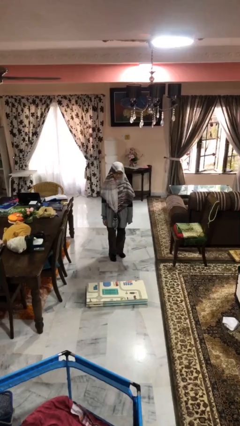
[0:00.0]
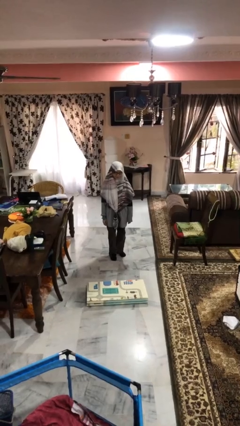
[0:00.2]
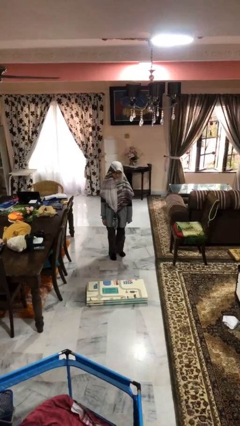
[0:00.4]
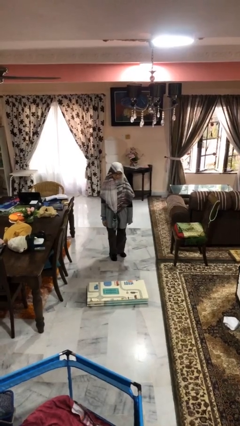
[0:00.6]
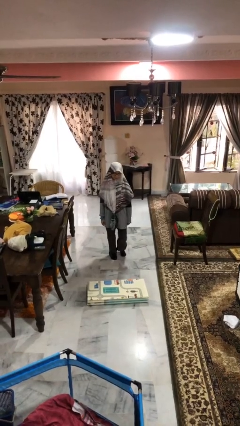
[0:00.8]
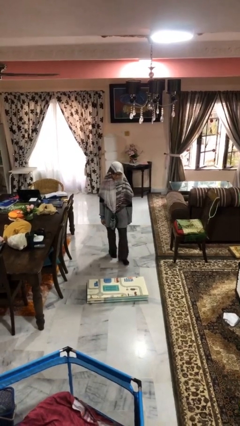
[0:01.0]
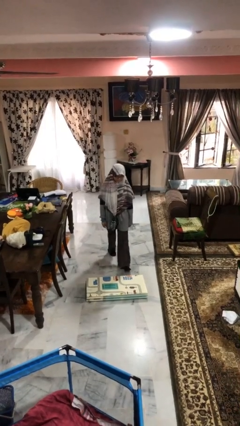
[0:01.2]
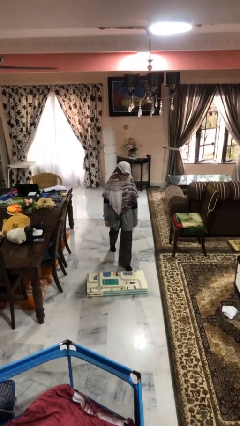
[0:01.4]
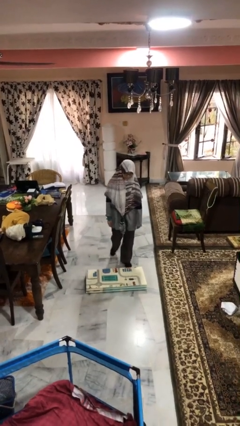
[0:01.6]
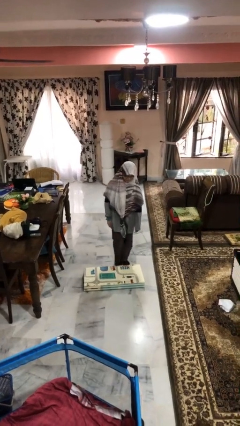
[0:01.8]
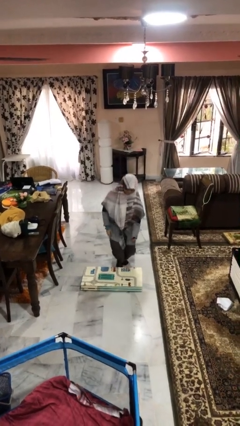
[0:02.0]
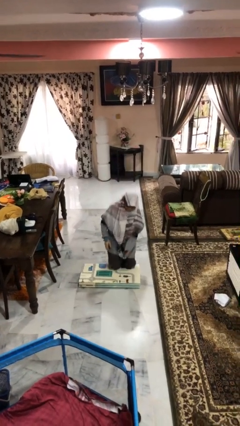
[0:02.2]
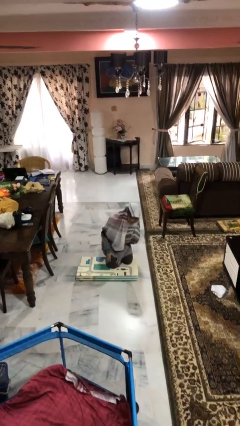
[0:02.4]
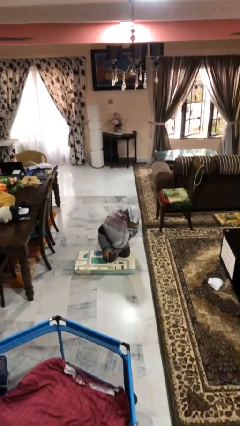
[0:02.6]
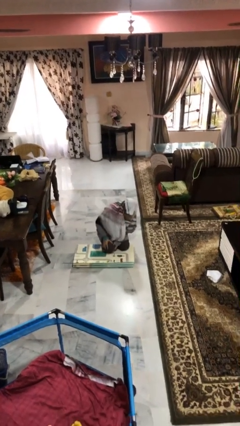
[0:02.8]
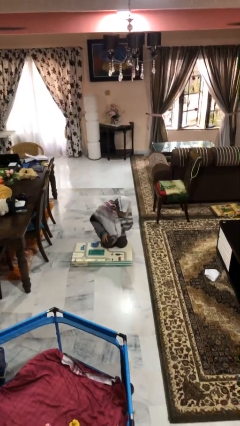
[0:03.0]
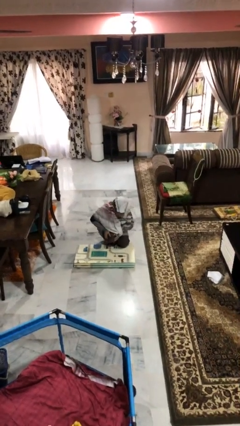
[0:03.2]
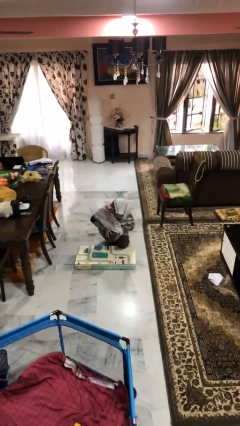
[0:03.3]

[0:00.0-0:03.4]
person trips on object on floor

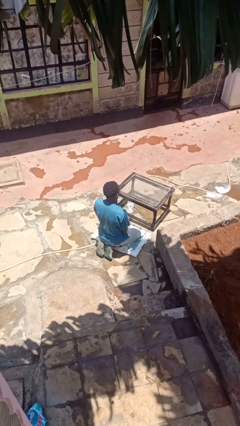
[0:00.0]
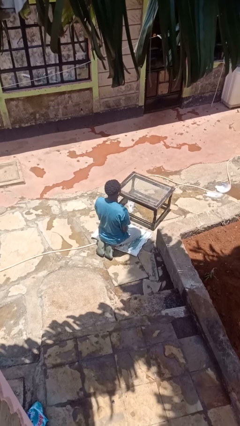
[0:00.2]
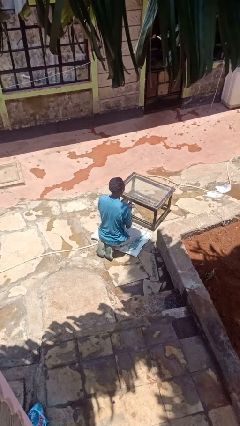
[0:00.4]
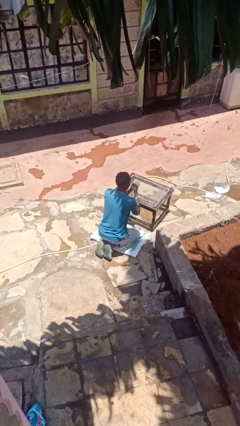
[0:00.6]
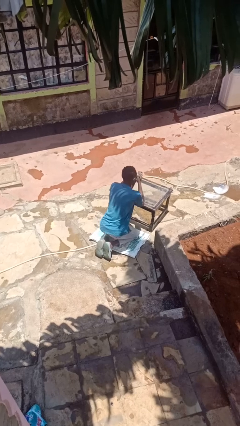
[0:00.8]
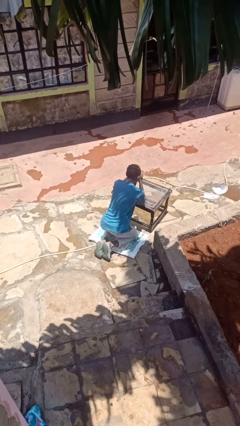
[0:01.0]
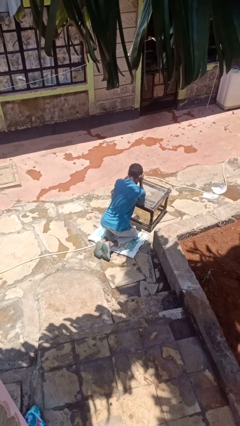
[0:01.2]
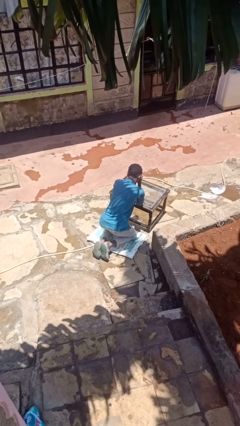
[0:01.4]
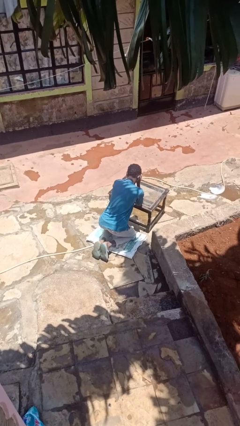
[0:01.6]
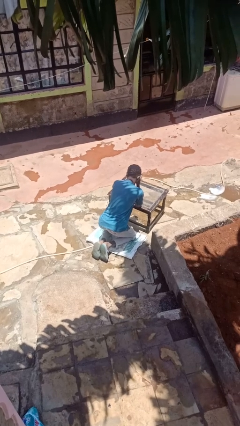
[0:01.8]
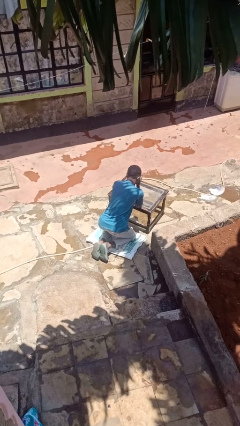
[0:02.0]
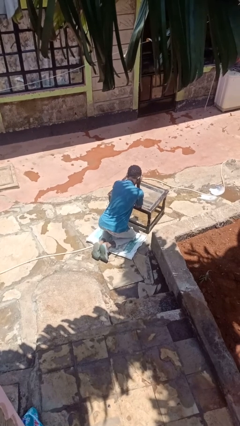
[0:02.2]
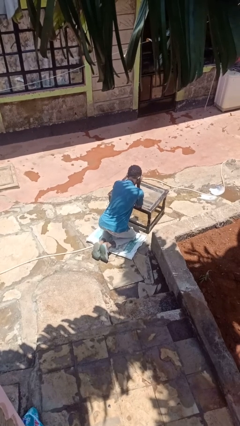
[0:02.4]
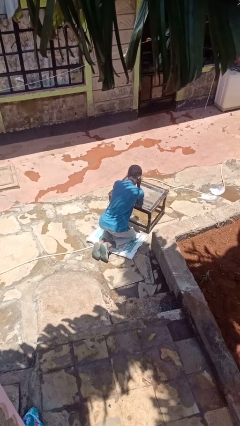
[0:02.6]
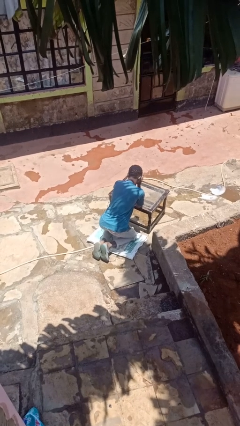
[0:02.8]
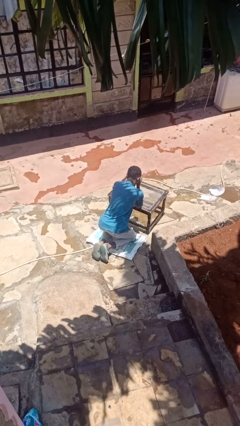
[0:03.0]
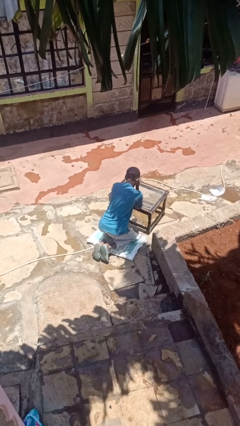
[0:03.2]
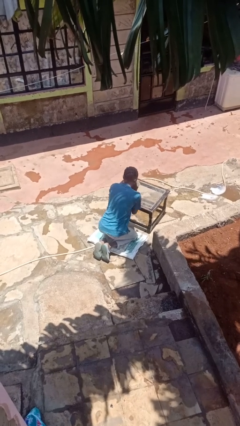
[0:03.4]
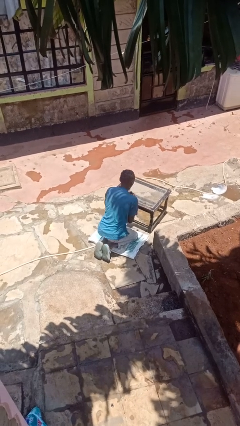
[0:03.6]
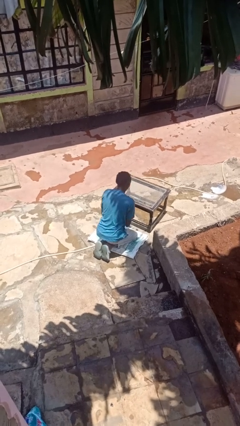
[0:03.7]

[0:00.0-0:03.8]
person prays

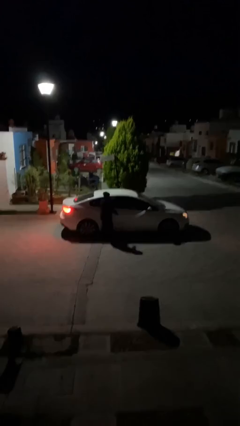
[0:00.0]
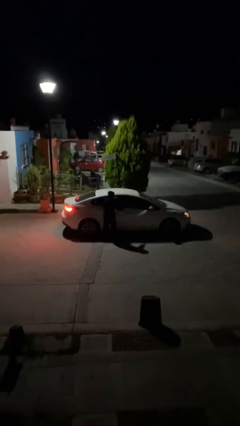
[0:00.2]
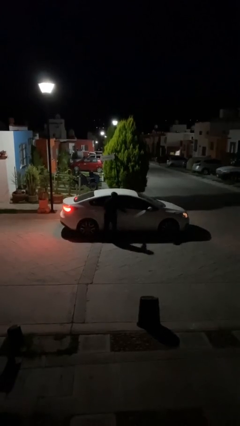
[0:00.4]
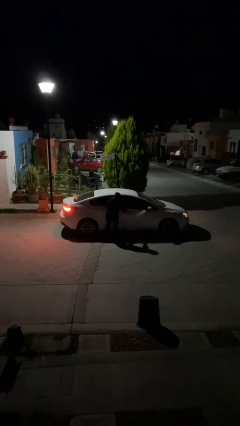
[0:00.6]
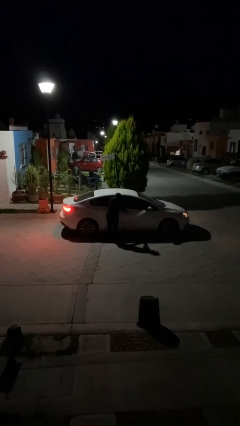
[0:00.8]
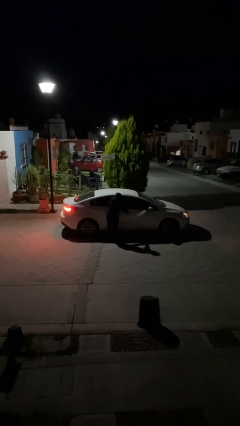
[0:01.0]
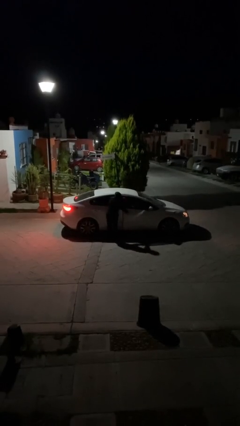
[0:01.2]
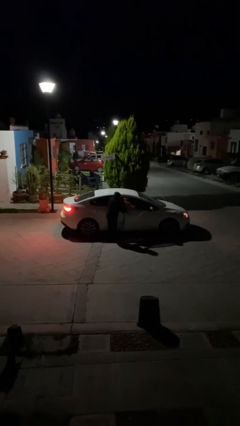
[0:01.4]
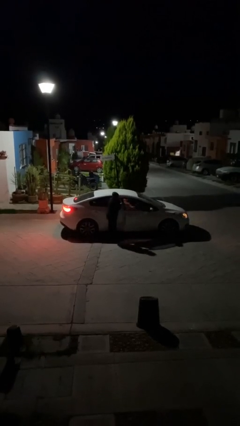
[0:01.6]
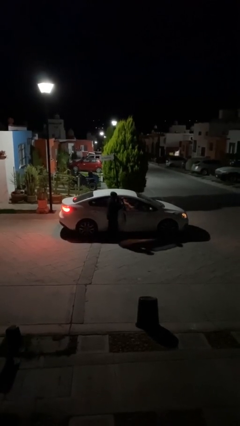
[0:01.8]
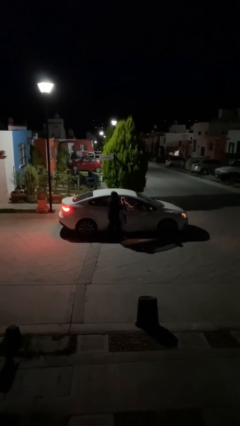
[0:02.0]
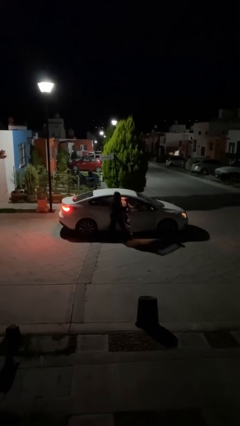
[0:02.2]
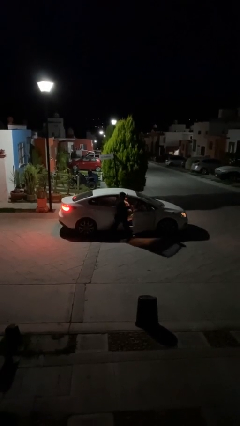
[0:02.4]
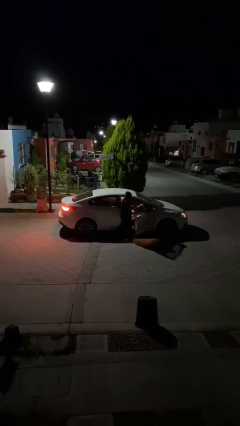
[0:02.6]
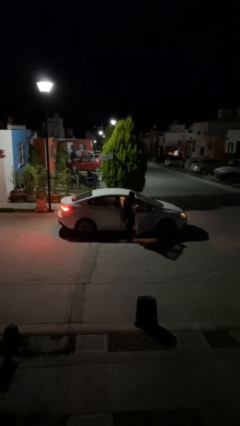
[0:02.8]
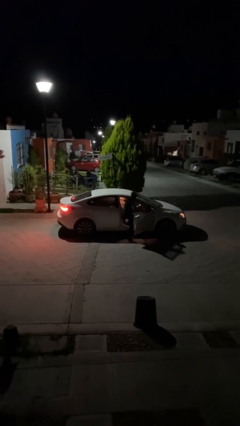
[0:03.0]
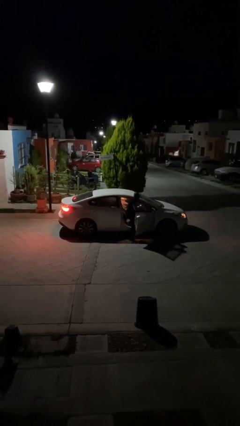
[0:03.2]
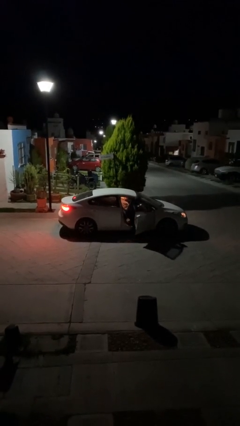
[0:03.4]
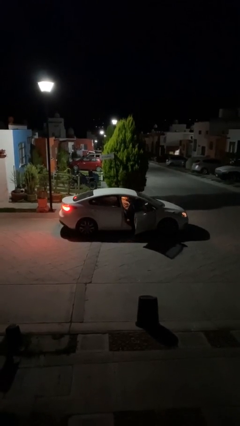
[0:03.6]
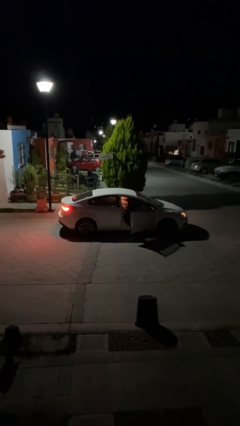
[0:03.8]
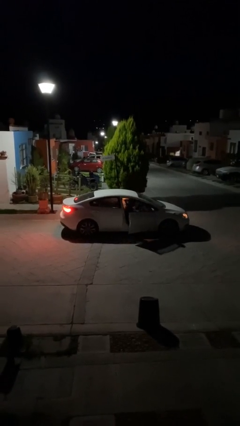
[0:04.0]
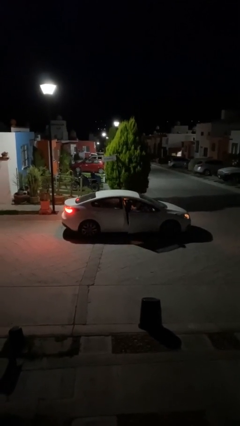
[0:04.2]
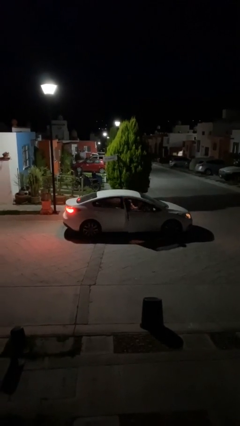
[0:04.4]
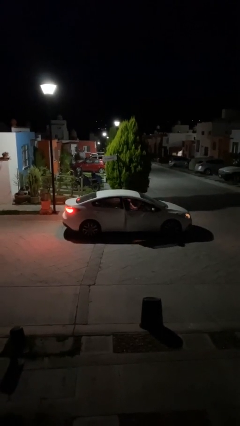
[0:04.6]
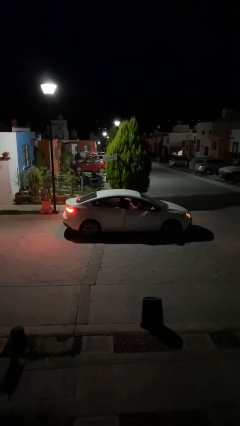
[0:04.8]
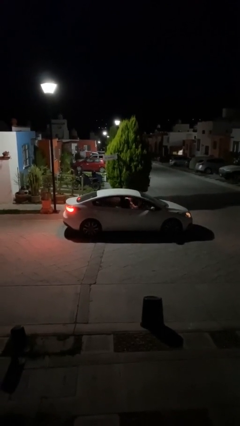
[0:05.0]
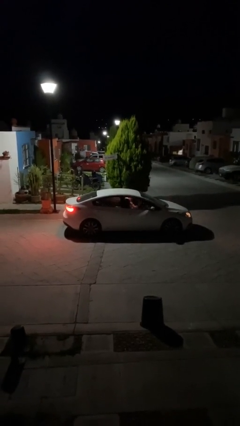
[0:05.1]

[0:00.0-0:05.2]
car picks up person

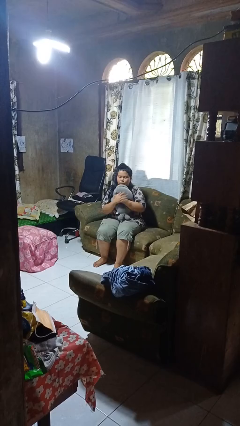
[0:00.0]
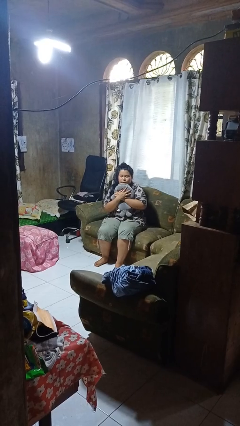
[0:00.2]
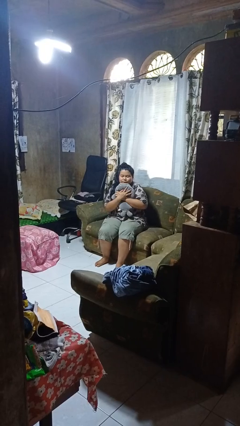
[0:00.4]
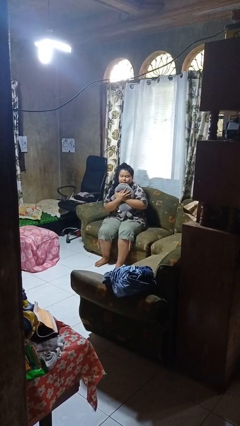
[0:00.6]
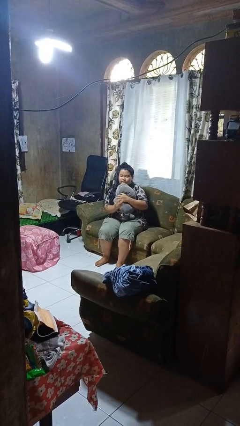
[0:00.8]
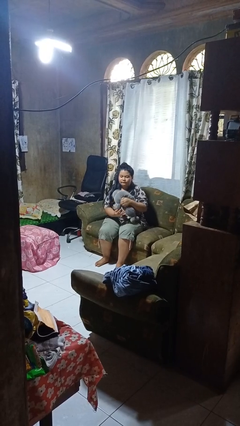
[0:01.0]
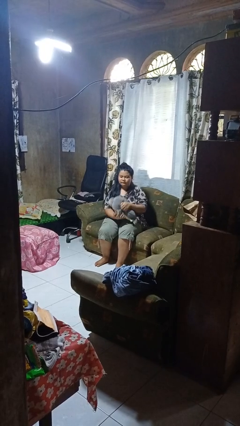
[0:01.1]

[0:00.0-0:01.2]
person hugs stuffed animal

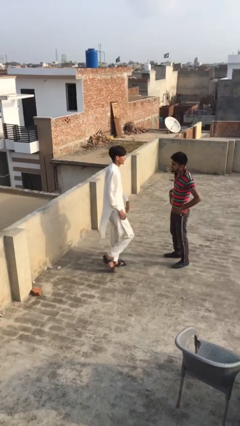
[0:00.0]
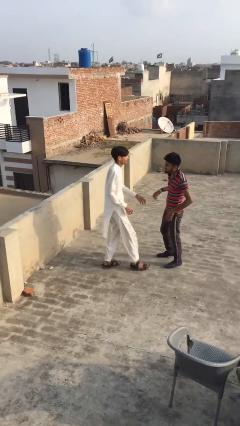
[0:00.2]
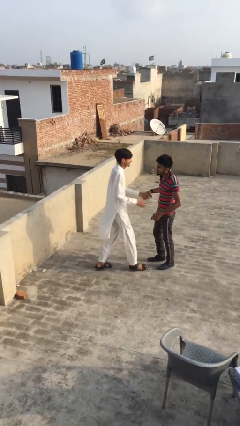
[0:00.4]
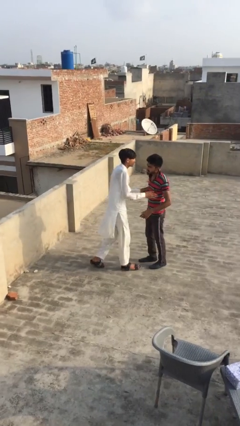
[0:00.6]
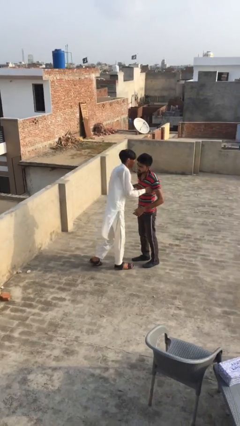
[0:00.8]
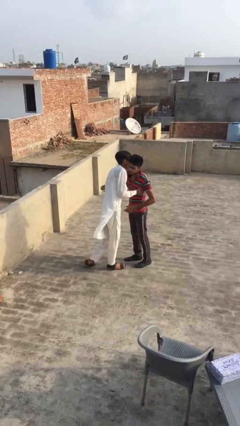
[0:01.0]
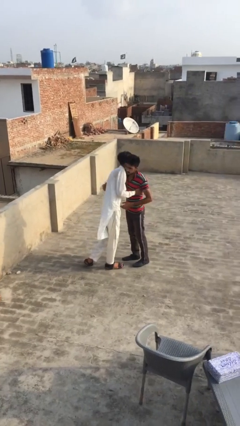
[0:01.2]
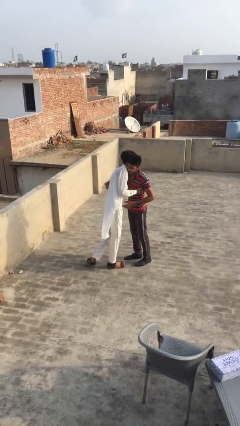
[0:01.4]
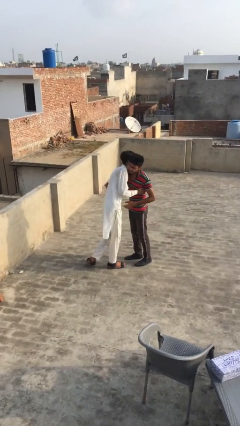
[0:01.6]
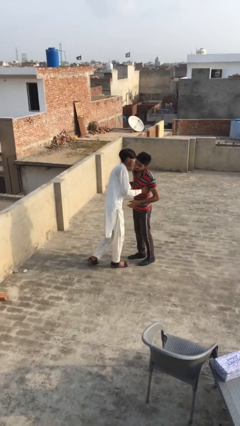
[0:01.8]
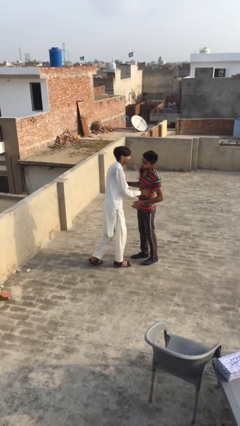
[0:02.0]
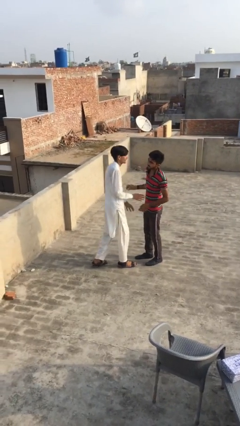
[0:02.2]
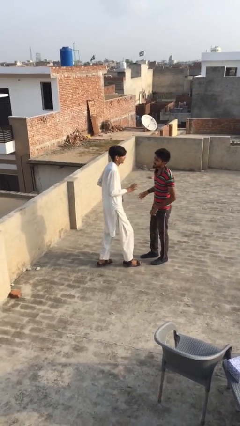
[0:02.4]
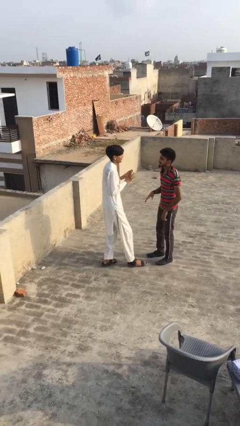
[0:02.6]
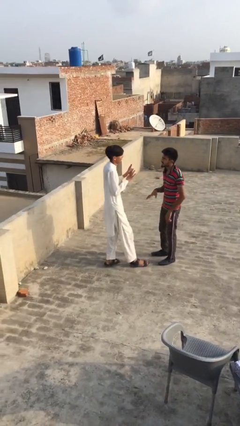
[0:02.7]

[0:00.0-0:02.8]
person embraces person

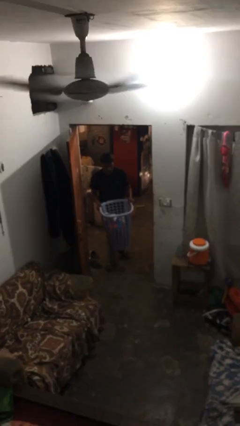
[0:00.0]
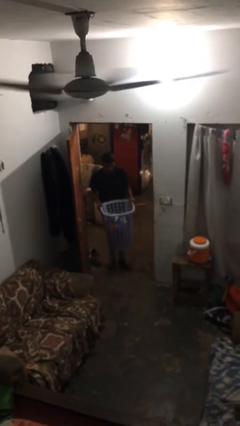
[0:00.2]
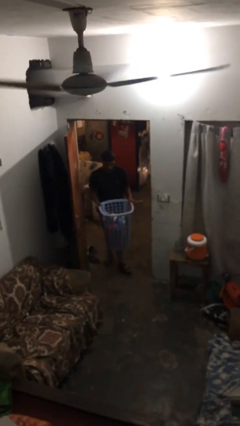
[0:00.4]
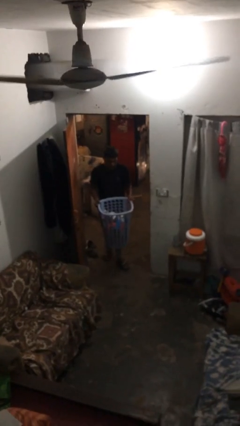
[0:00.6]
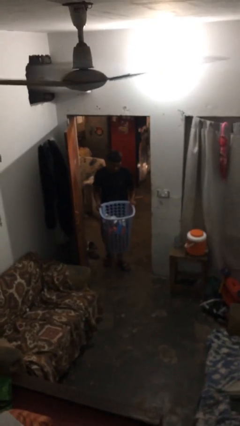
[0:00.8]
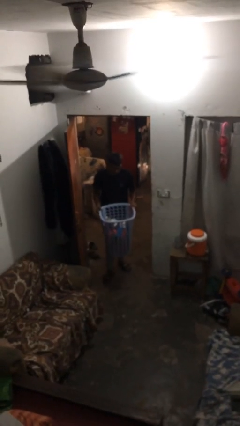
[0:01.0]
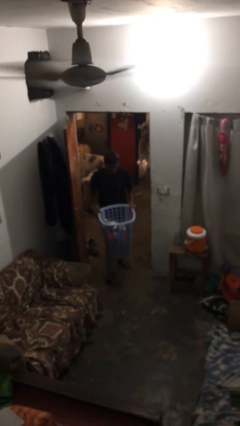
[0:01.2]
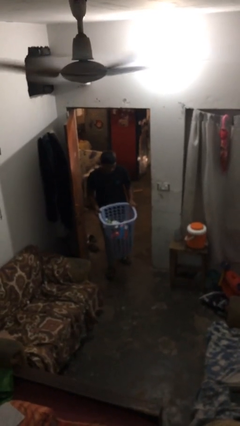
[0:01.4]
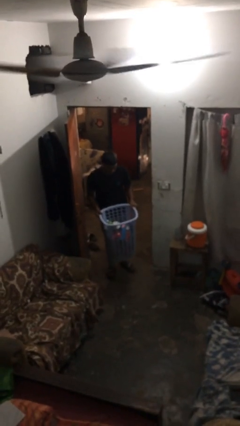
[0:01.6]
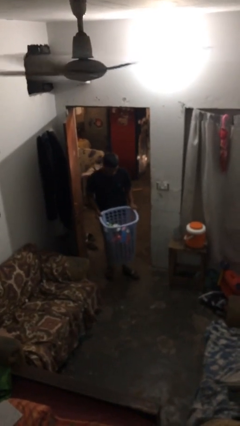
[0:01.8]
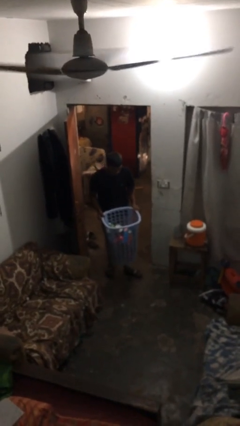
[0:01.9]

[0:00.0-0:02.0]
person carries heavy object
